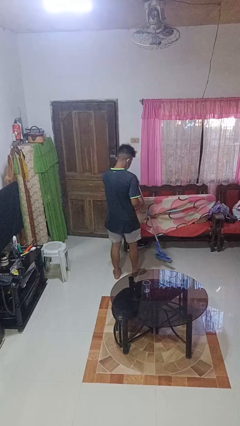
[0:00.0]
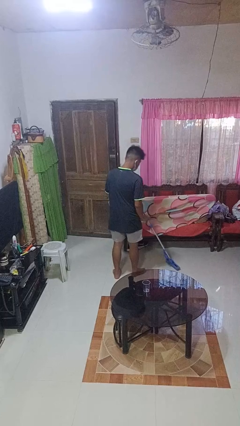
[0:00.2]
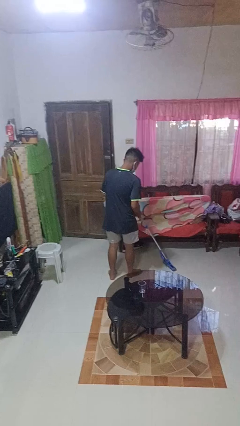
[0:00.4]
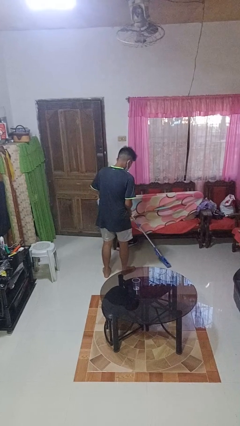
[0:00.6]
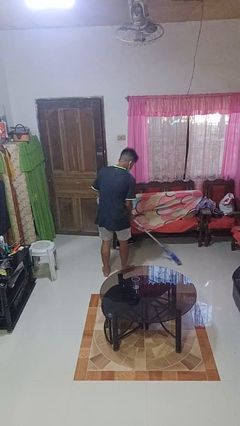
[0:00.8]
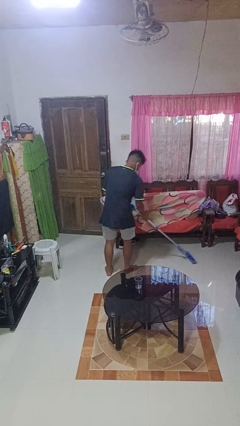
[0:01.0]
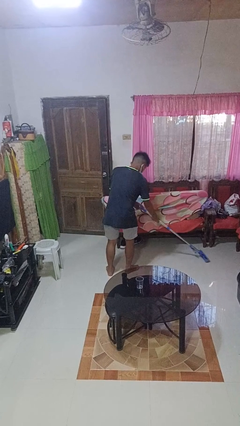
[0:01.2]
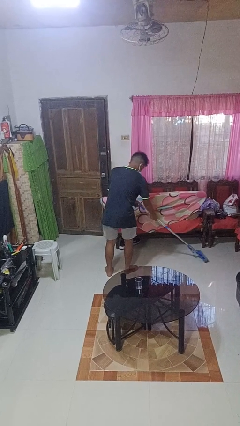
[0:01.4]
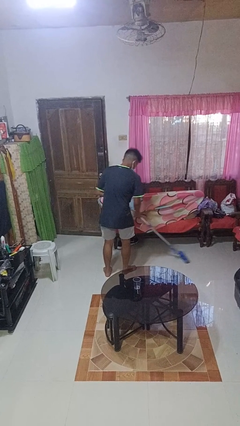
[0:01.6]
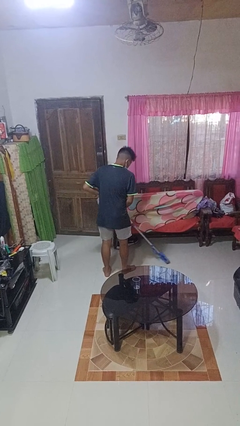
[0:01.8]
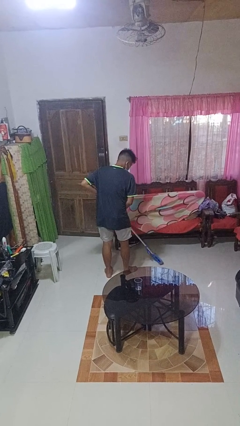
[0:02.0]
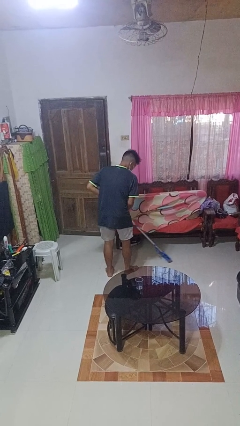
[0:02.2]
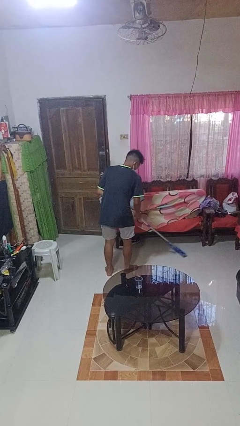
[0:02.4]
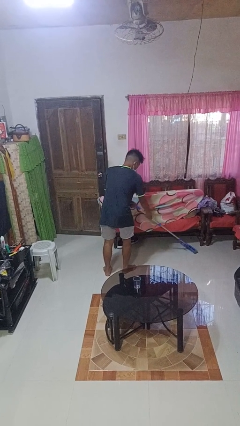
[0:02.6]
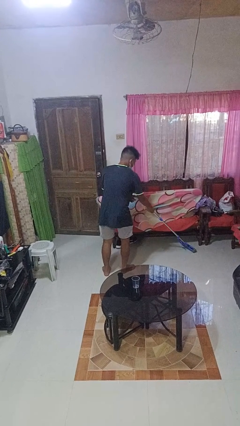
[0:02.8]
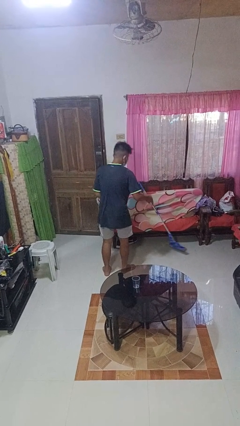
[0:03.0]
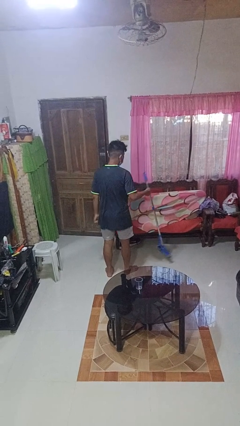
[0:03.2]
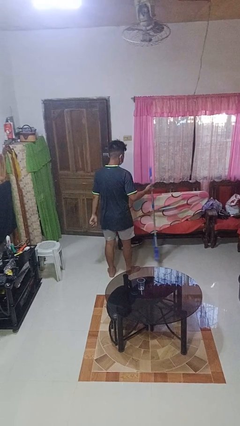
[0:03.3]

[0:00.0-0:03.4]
person mops

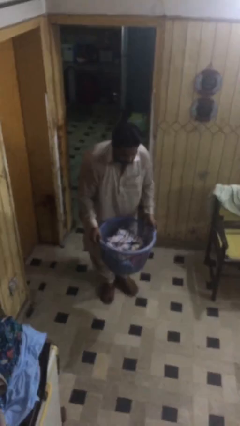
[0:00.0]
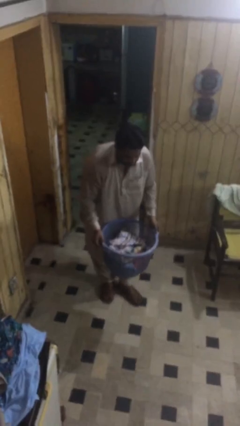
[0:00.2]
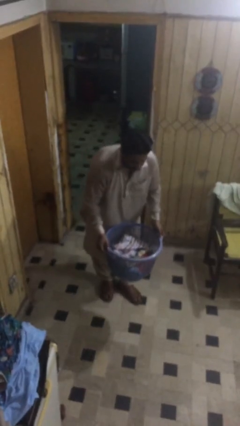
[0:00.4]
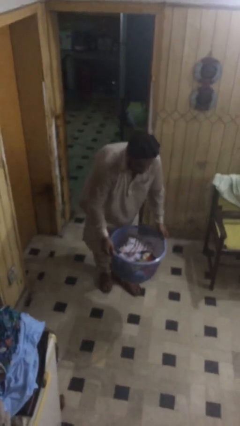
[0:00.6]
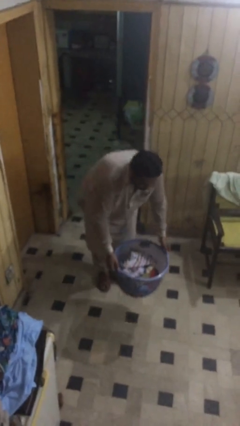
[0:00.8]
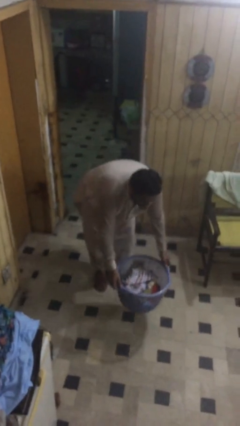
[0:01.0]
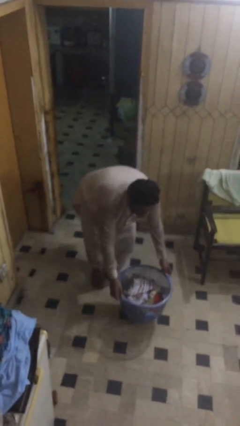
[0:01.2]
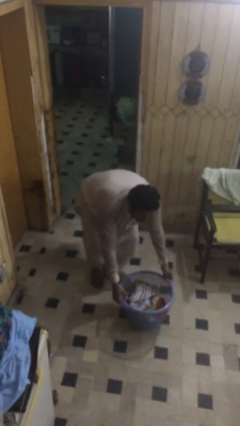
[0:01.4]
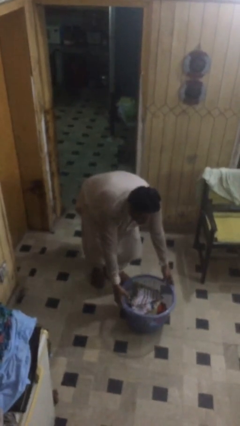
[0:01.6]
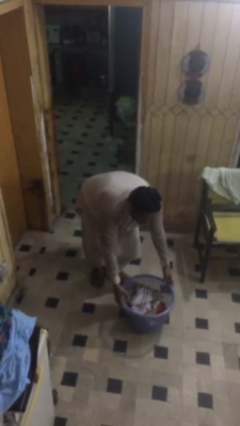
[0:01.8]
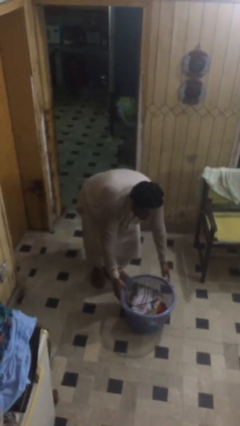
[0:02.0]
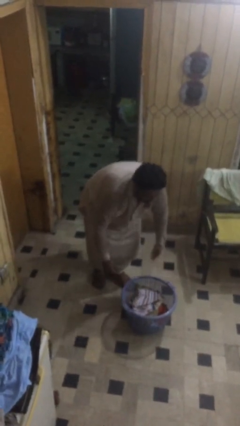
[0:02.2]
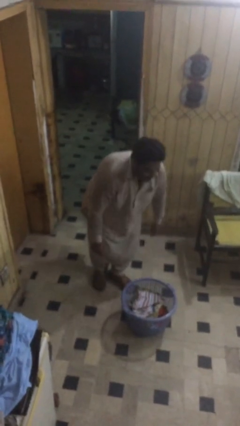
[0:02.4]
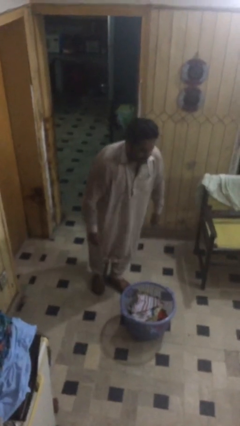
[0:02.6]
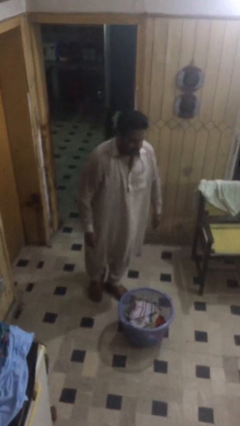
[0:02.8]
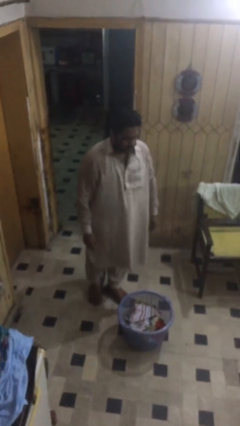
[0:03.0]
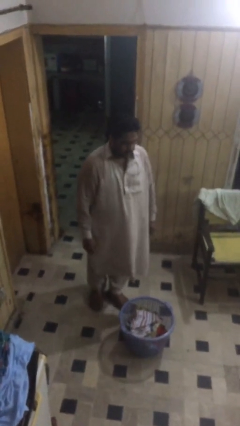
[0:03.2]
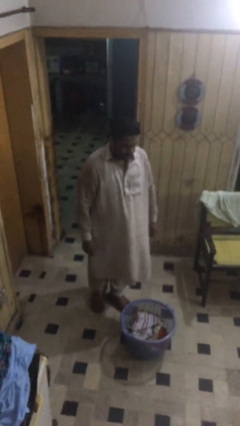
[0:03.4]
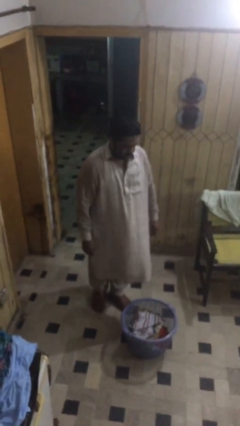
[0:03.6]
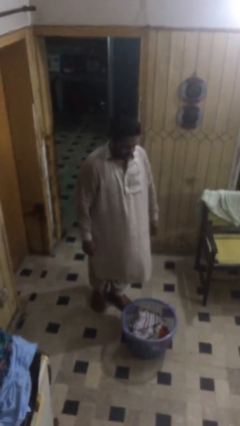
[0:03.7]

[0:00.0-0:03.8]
person puts down object on floor

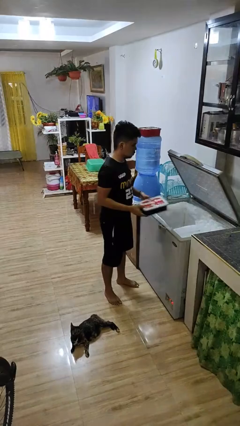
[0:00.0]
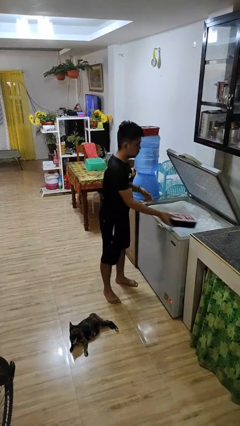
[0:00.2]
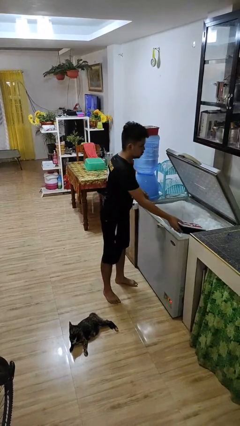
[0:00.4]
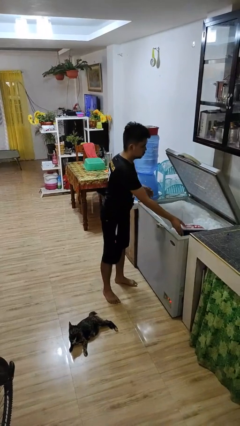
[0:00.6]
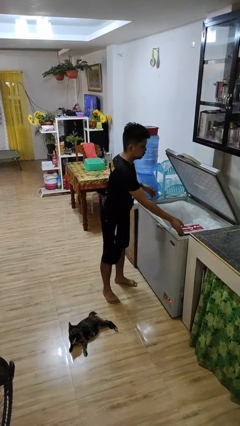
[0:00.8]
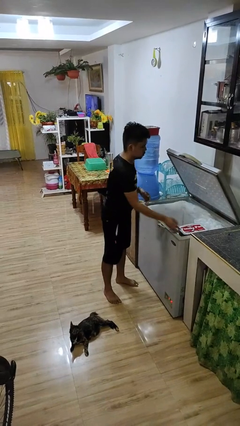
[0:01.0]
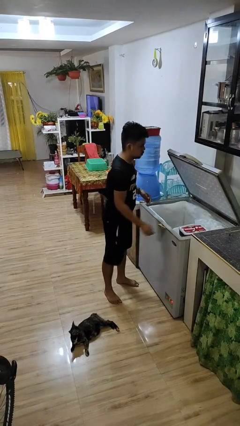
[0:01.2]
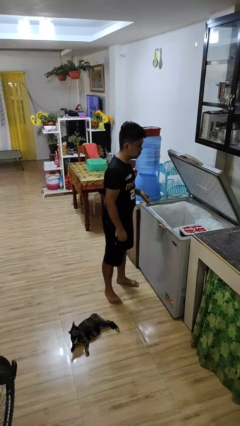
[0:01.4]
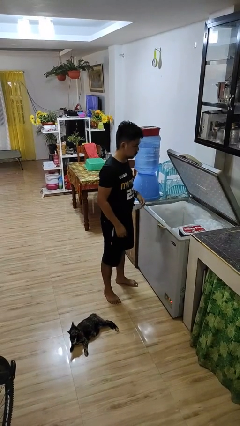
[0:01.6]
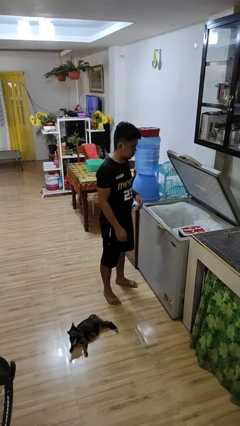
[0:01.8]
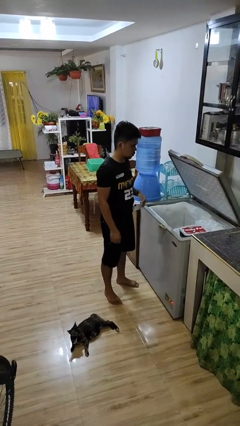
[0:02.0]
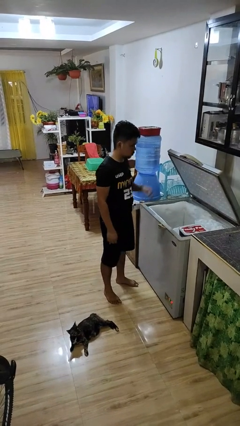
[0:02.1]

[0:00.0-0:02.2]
person puts object into refrigerator

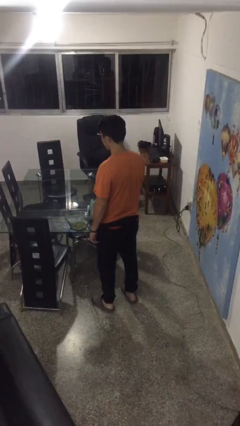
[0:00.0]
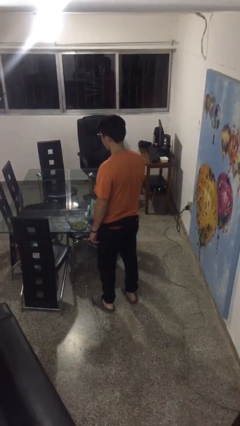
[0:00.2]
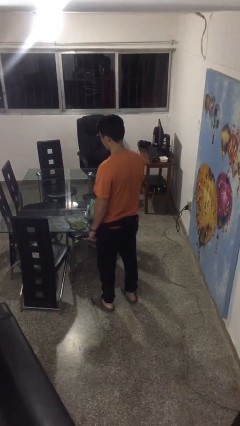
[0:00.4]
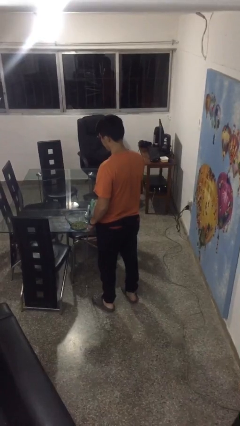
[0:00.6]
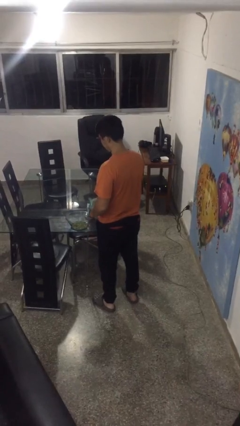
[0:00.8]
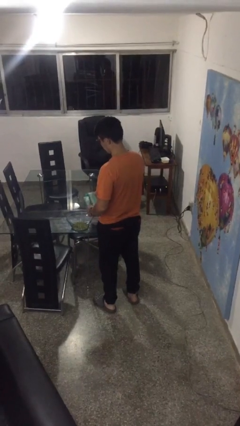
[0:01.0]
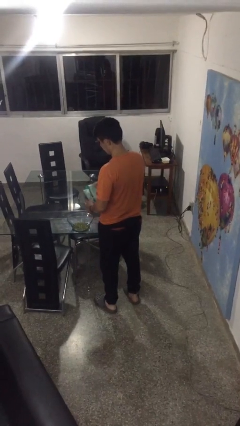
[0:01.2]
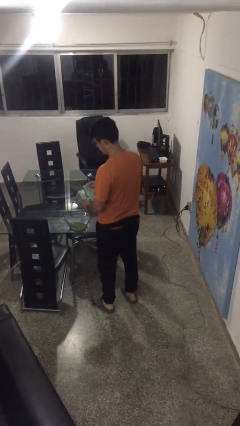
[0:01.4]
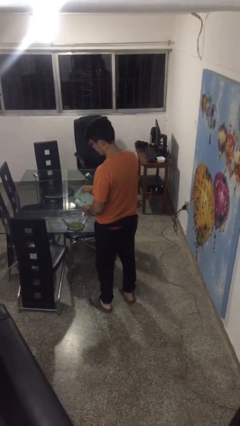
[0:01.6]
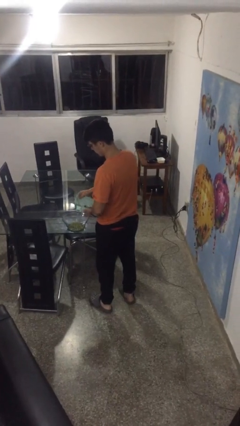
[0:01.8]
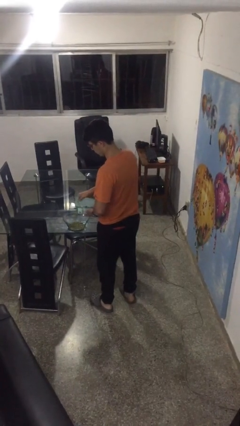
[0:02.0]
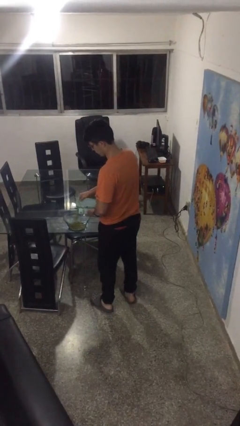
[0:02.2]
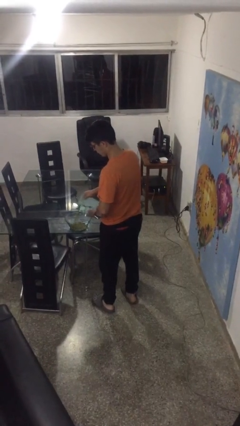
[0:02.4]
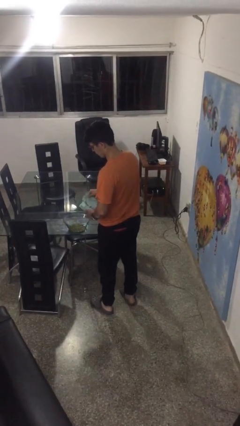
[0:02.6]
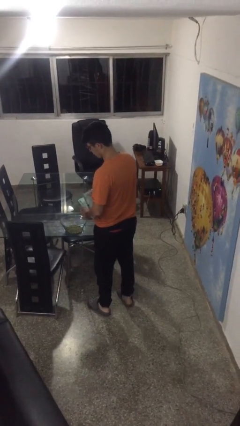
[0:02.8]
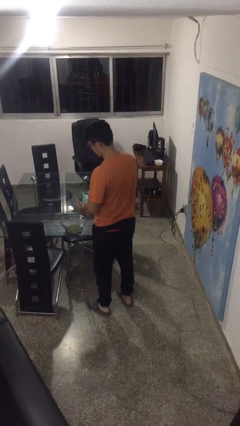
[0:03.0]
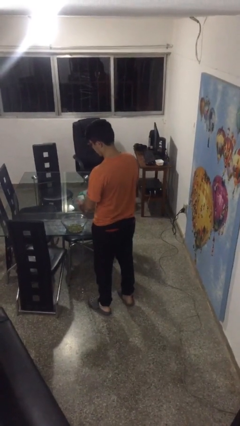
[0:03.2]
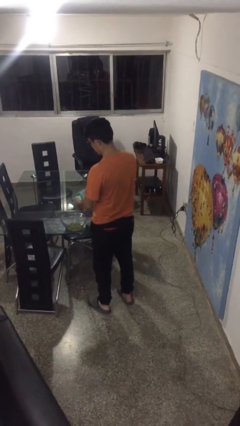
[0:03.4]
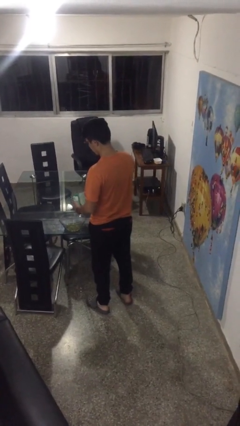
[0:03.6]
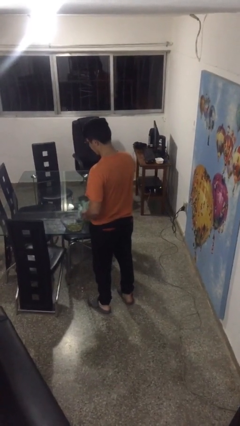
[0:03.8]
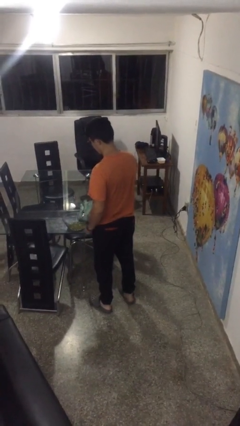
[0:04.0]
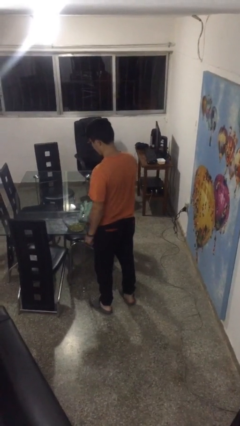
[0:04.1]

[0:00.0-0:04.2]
person pours into bowl

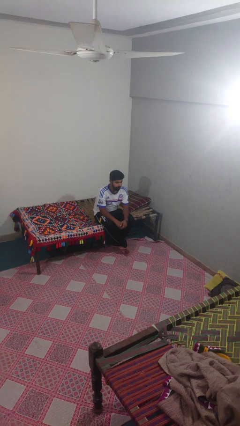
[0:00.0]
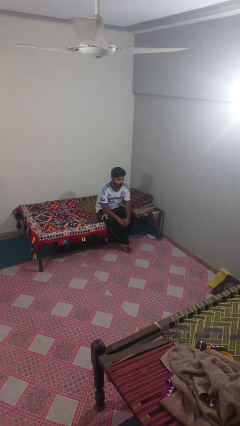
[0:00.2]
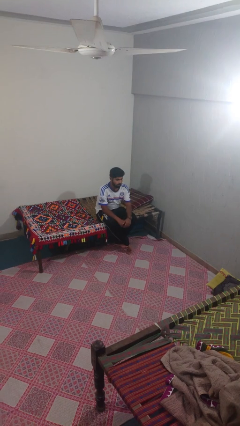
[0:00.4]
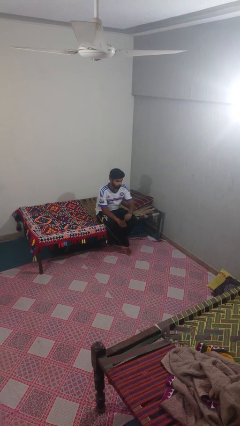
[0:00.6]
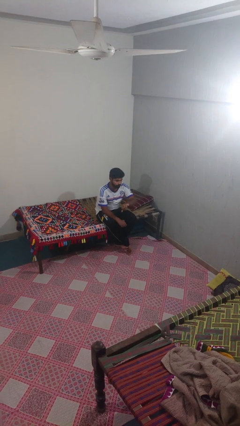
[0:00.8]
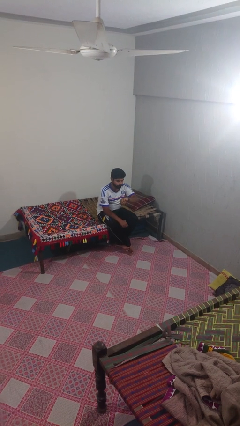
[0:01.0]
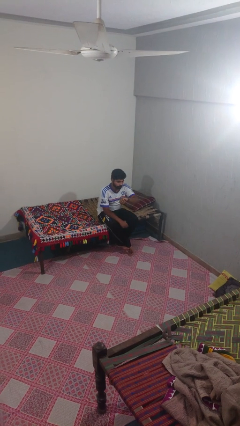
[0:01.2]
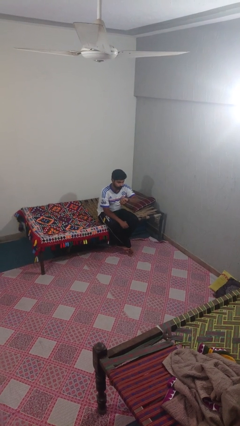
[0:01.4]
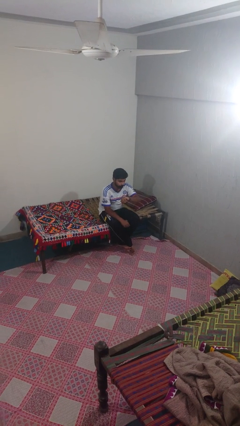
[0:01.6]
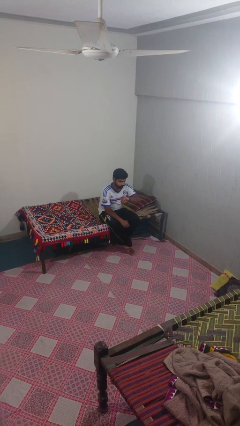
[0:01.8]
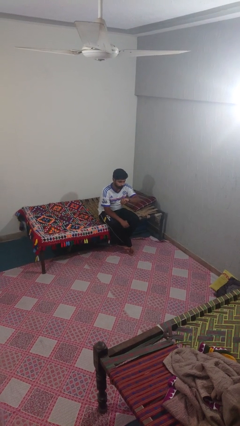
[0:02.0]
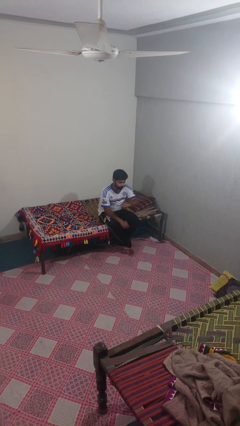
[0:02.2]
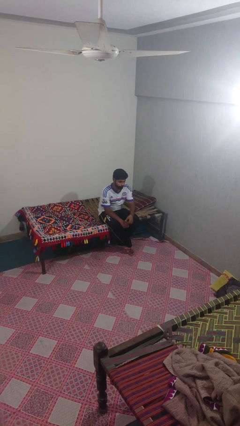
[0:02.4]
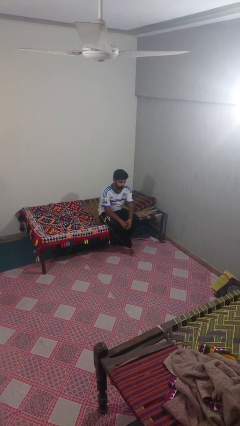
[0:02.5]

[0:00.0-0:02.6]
person looks at wristwatch

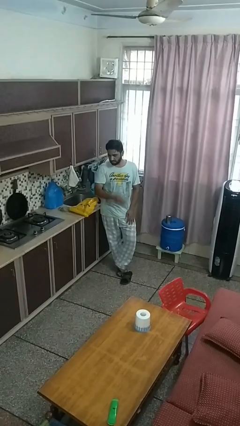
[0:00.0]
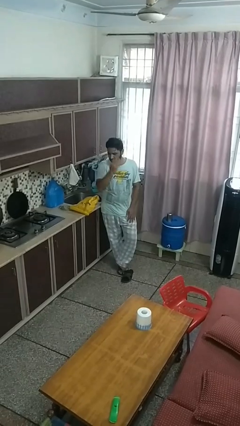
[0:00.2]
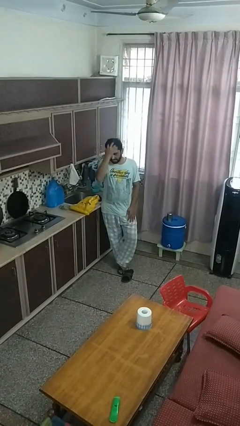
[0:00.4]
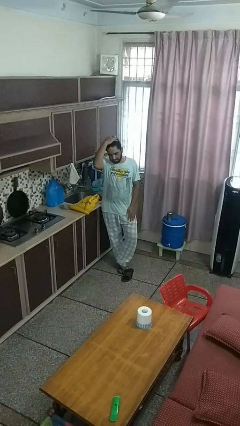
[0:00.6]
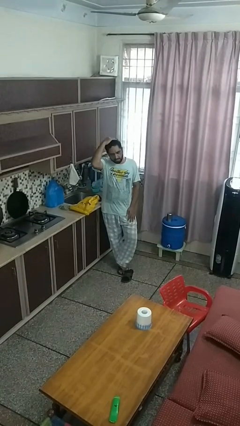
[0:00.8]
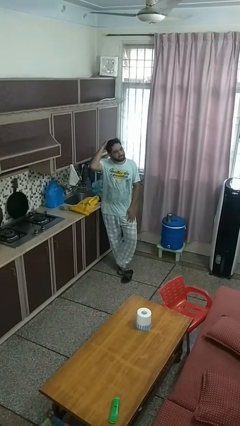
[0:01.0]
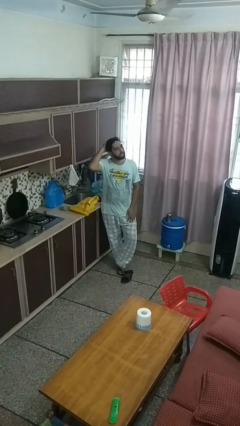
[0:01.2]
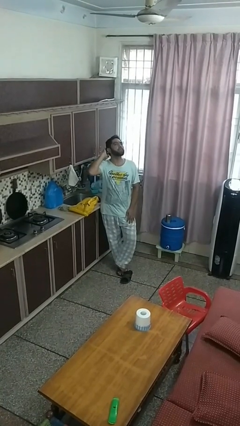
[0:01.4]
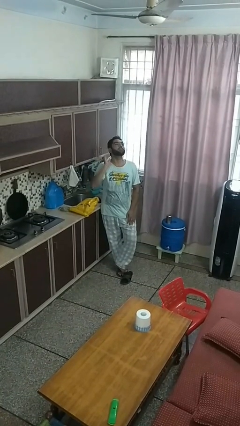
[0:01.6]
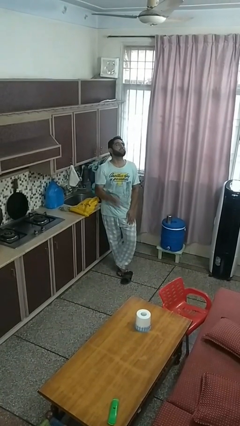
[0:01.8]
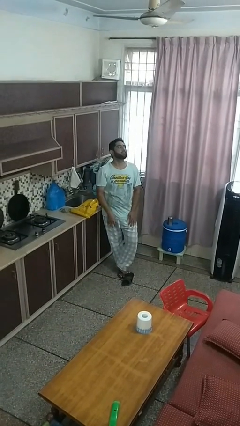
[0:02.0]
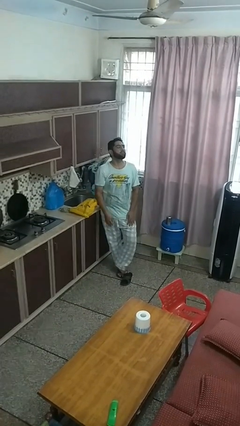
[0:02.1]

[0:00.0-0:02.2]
person strokes hair
